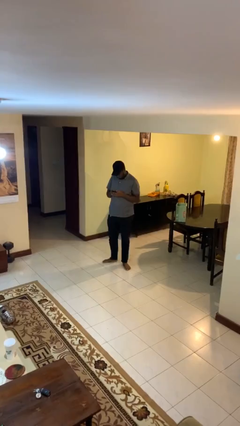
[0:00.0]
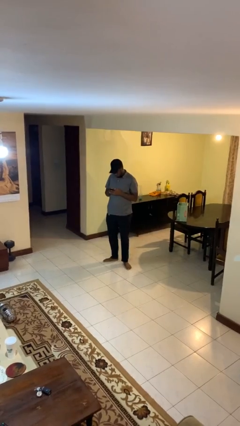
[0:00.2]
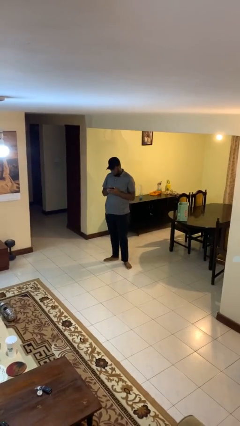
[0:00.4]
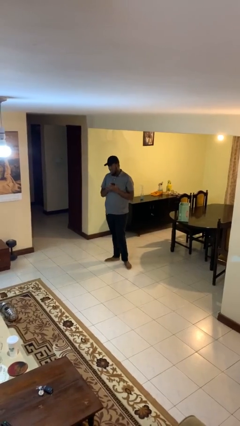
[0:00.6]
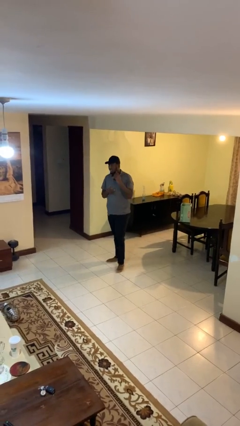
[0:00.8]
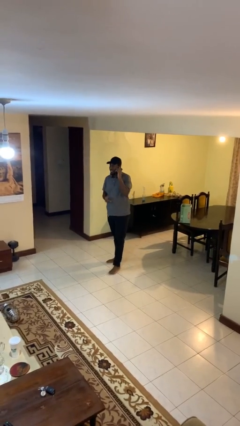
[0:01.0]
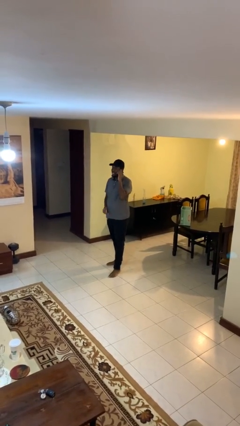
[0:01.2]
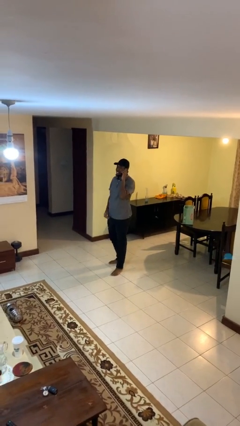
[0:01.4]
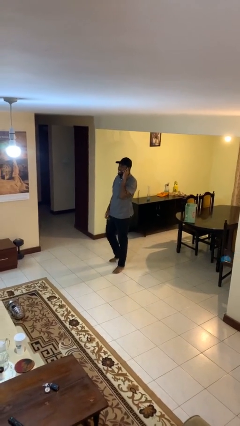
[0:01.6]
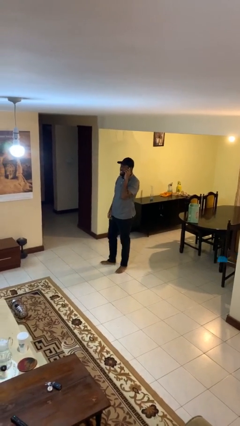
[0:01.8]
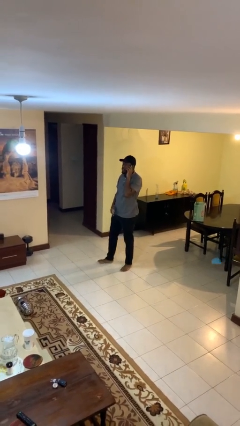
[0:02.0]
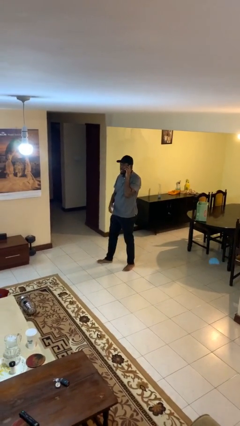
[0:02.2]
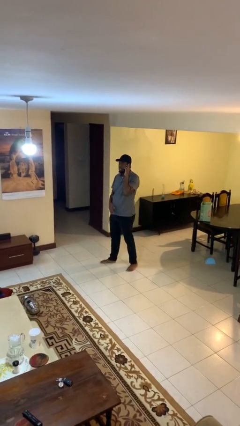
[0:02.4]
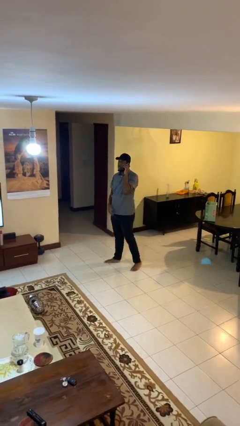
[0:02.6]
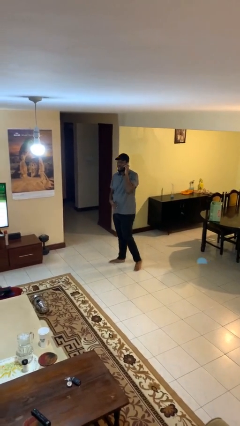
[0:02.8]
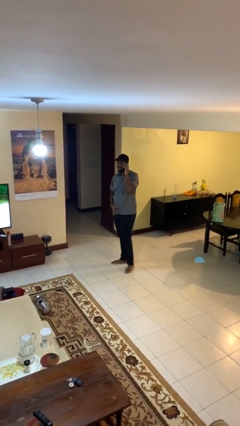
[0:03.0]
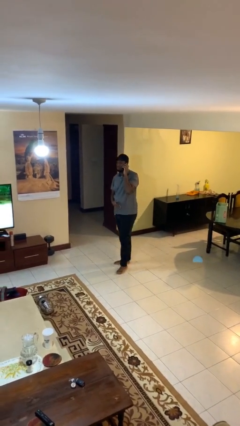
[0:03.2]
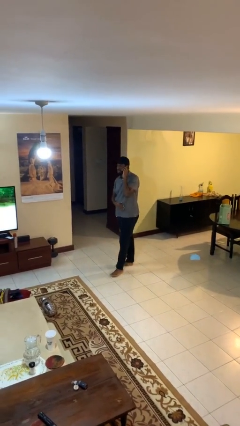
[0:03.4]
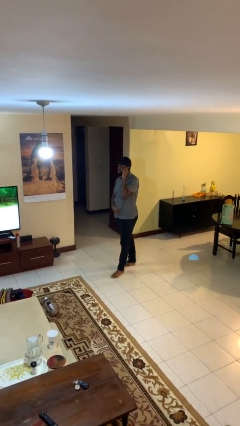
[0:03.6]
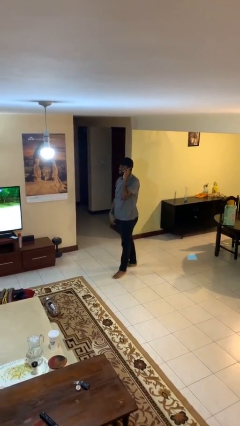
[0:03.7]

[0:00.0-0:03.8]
person talks on phone

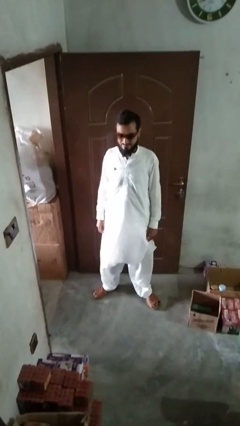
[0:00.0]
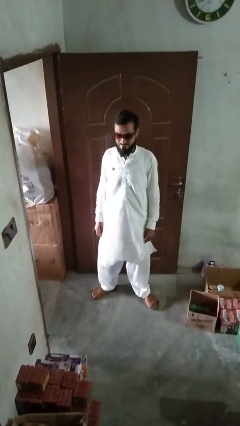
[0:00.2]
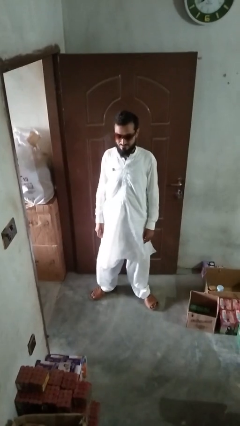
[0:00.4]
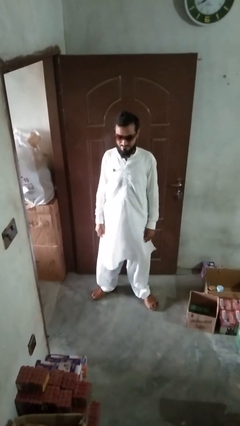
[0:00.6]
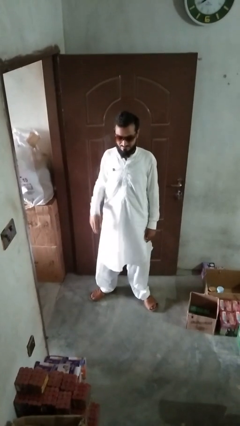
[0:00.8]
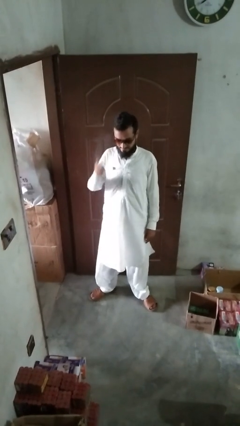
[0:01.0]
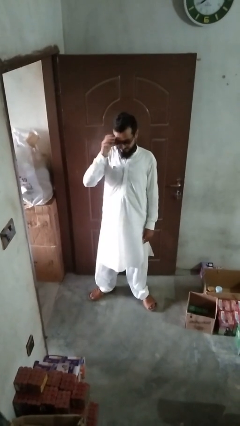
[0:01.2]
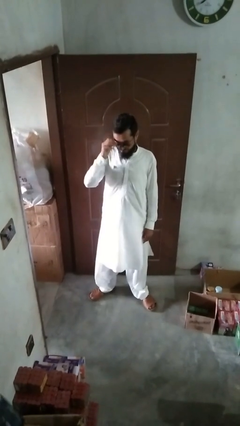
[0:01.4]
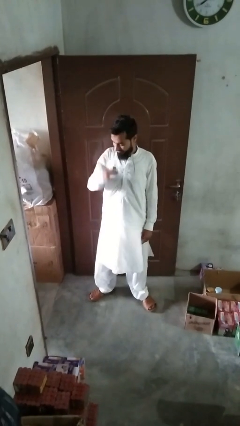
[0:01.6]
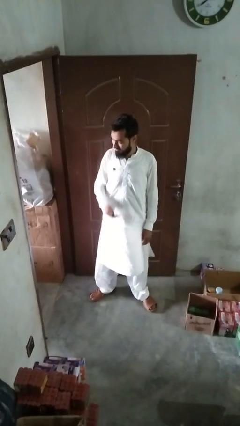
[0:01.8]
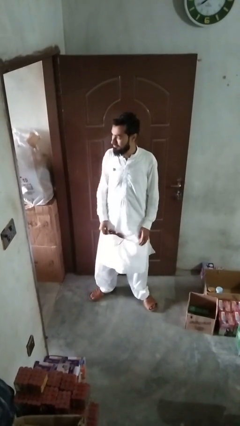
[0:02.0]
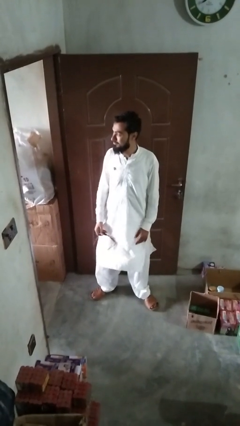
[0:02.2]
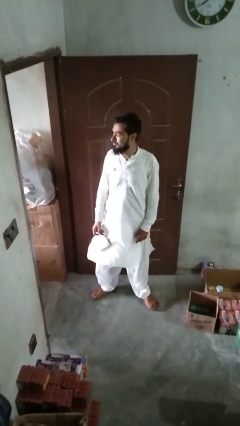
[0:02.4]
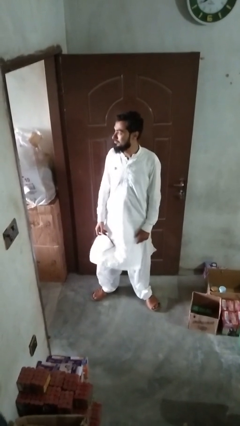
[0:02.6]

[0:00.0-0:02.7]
person takes off sunglasses

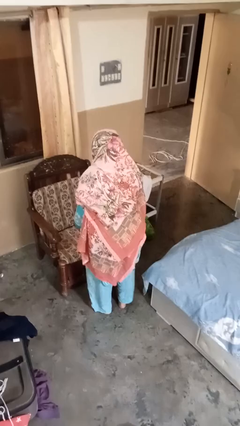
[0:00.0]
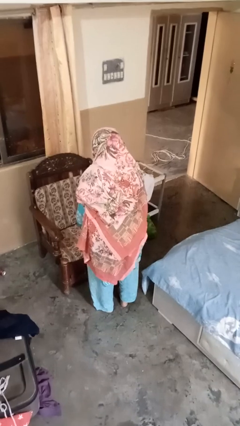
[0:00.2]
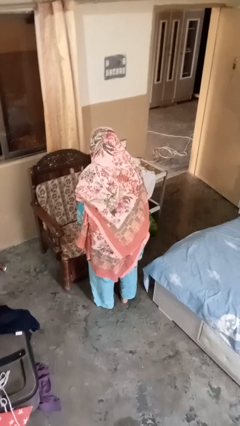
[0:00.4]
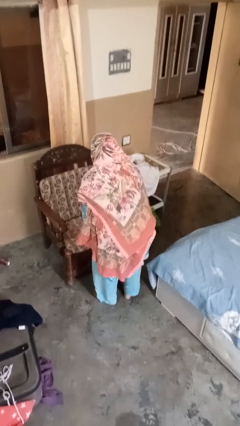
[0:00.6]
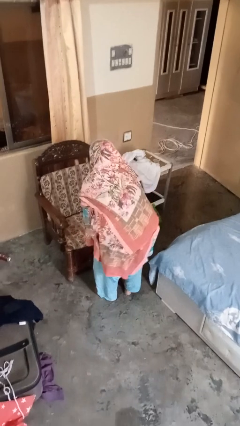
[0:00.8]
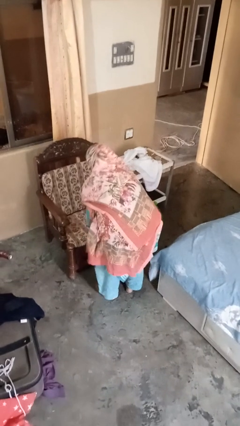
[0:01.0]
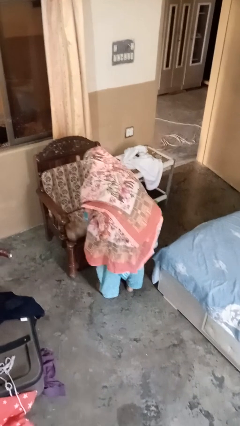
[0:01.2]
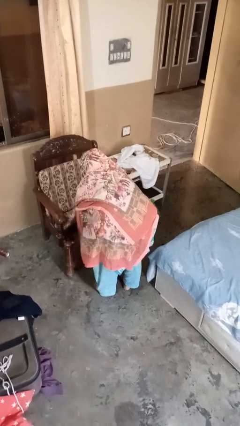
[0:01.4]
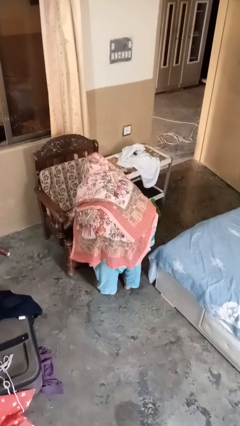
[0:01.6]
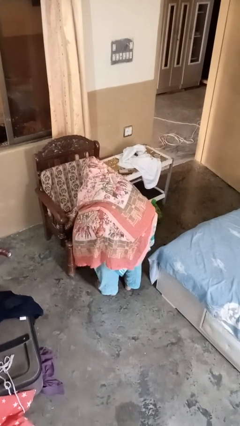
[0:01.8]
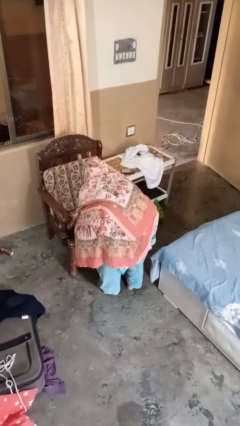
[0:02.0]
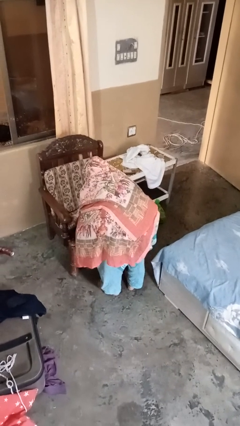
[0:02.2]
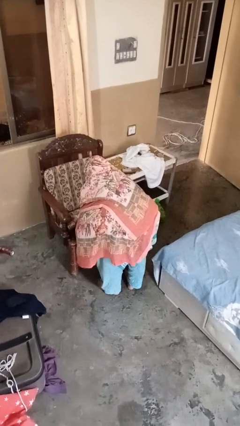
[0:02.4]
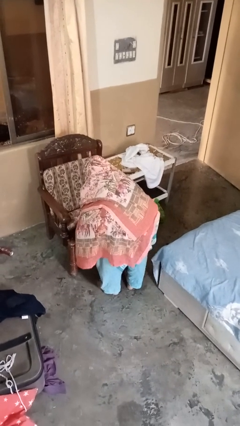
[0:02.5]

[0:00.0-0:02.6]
person searches under couch

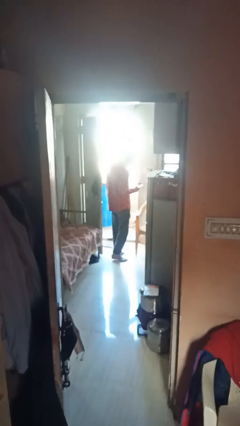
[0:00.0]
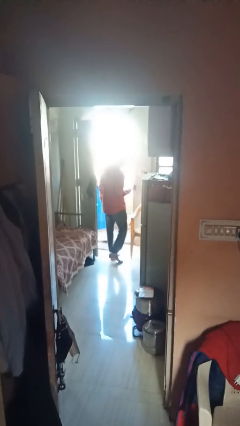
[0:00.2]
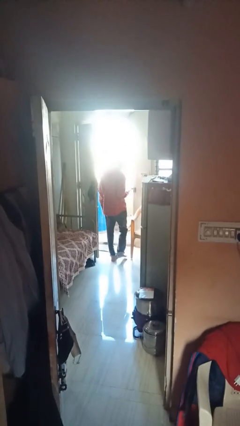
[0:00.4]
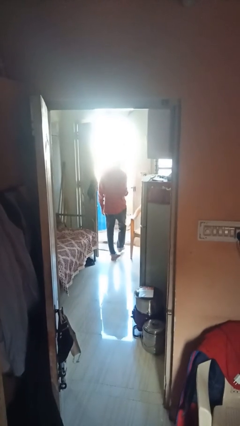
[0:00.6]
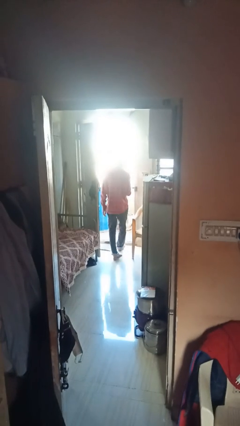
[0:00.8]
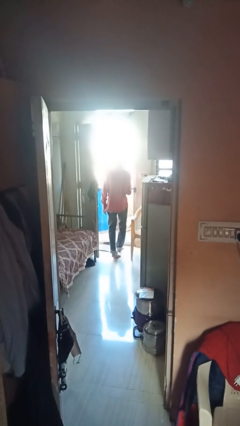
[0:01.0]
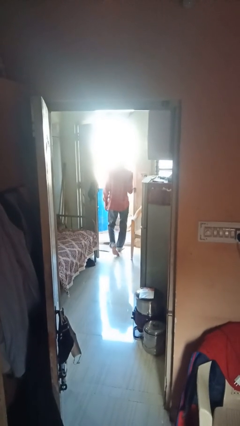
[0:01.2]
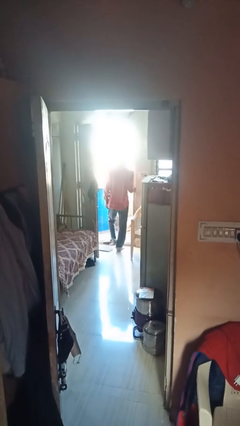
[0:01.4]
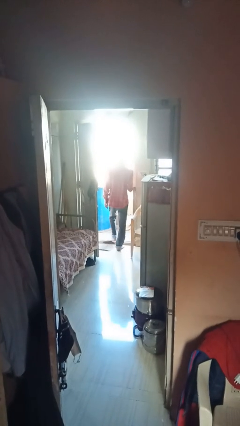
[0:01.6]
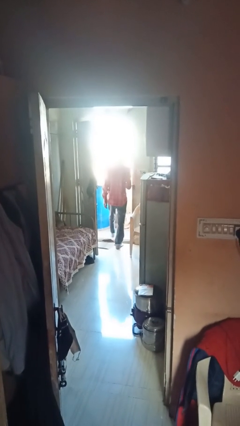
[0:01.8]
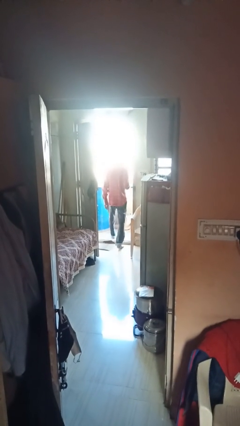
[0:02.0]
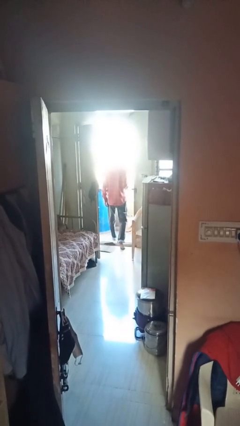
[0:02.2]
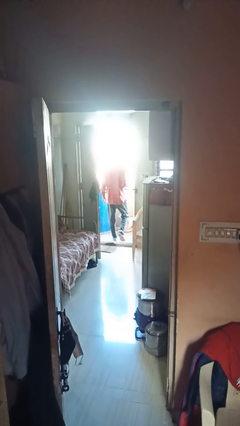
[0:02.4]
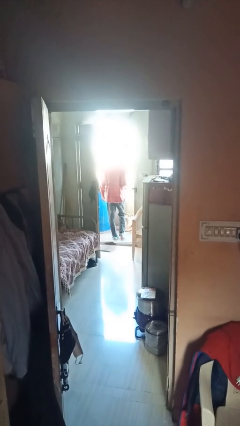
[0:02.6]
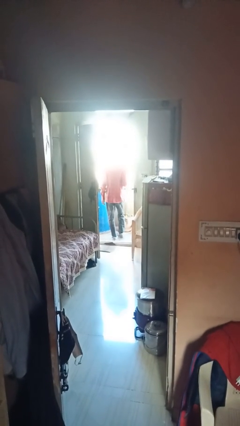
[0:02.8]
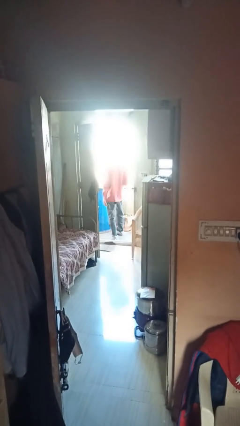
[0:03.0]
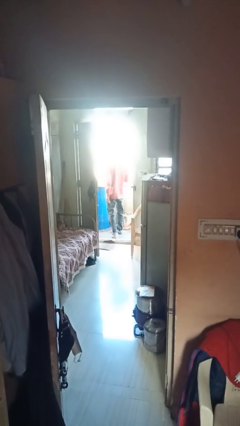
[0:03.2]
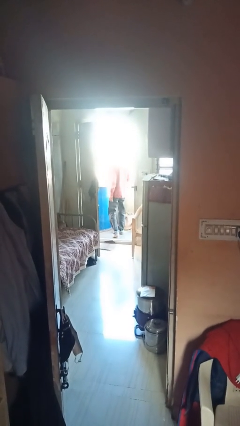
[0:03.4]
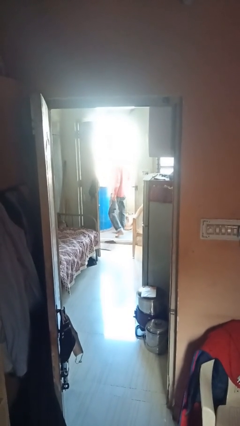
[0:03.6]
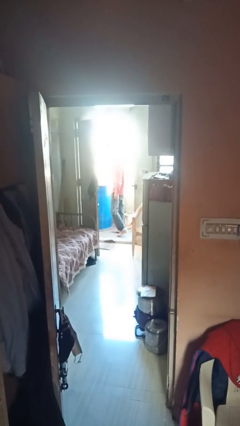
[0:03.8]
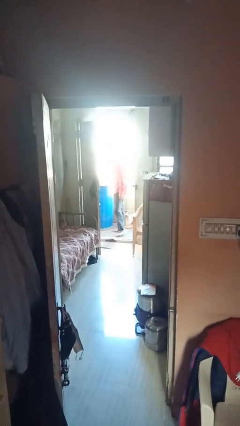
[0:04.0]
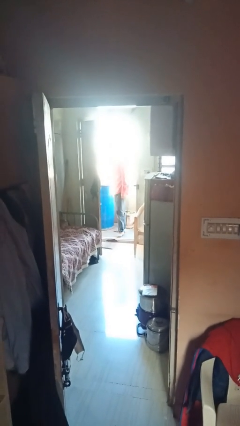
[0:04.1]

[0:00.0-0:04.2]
person exits scene through structure

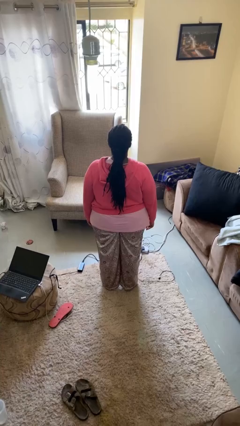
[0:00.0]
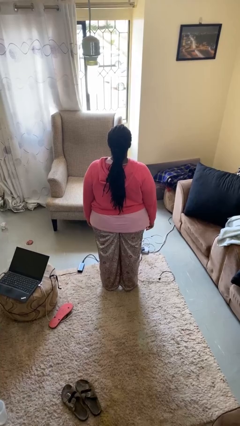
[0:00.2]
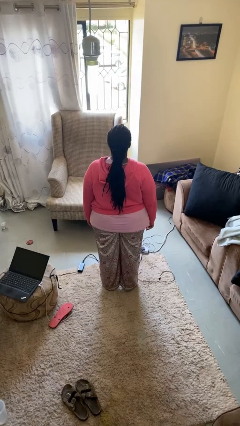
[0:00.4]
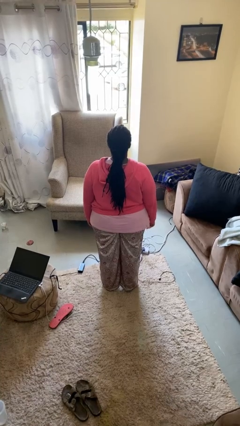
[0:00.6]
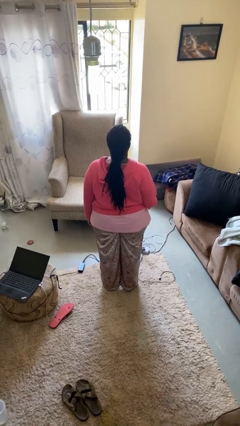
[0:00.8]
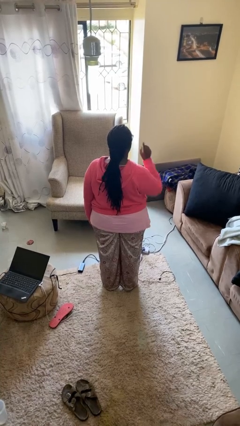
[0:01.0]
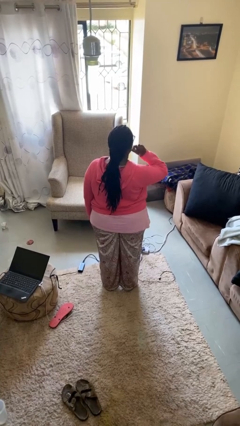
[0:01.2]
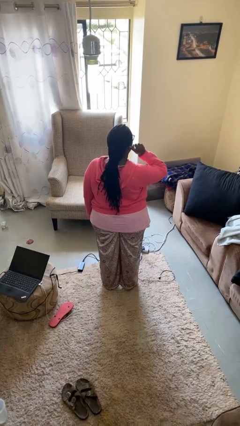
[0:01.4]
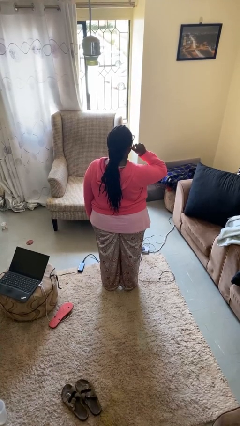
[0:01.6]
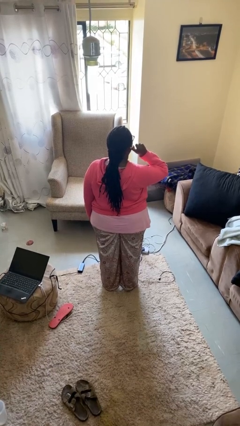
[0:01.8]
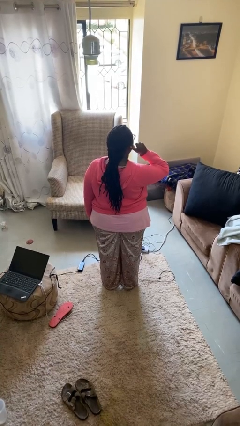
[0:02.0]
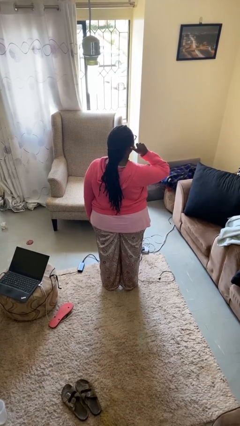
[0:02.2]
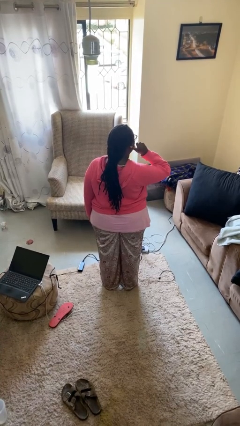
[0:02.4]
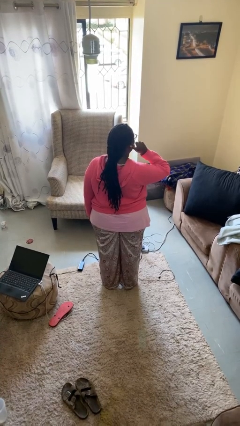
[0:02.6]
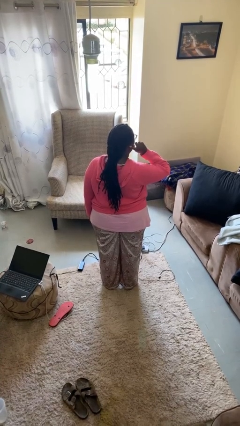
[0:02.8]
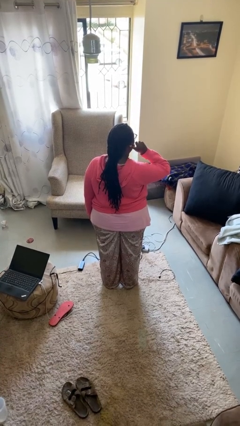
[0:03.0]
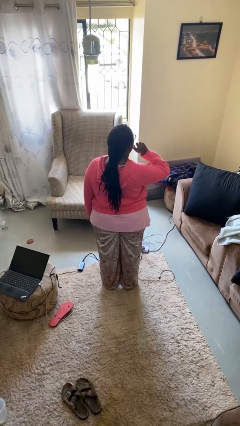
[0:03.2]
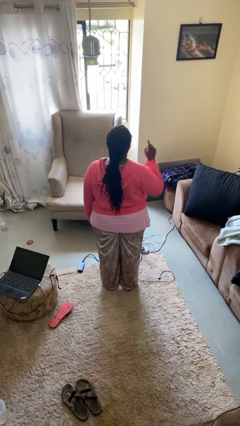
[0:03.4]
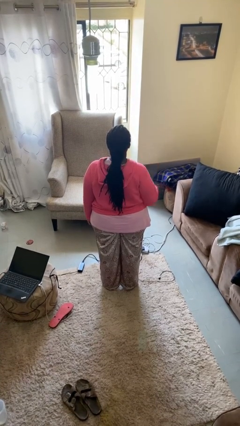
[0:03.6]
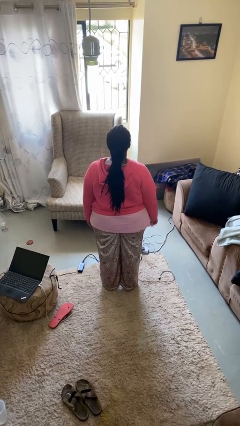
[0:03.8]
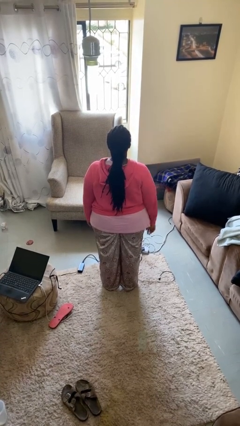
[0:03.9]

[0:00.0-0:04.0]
person gestures listen closely

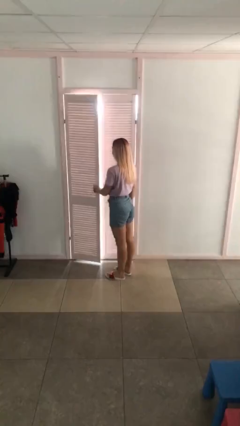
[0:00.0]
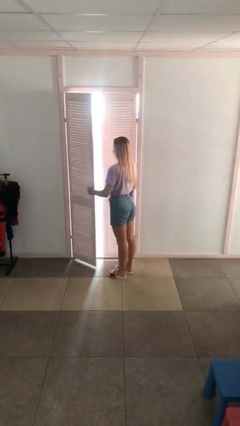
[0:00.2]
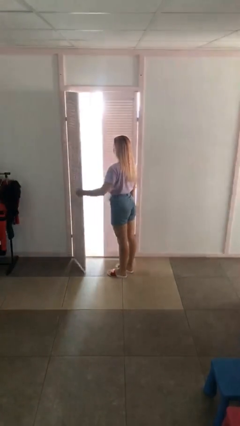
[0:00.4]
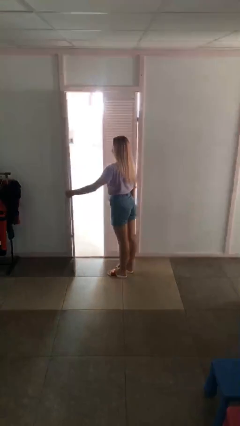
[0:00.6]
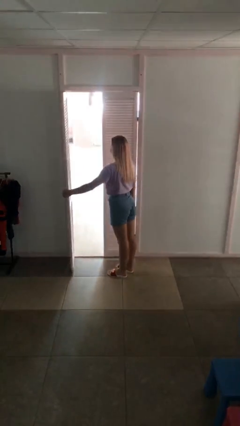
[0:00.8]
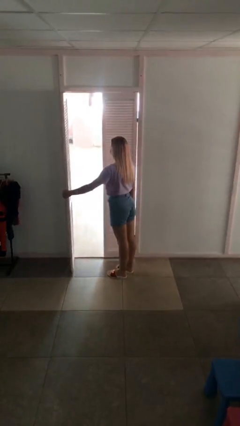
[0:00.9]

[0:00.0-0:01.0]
person opens facility door
